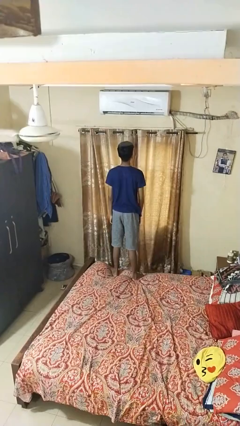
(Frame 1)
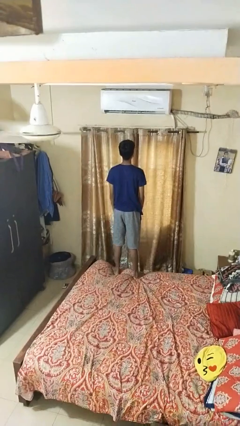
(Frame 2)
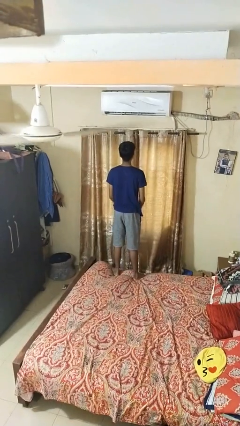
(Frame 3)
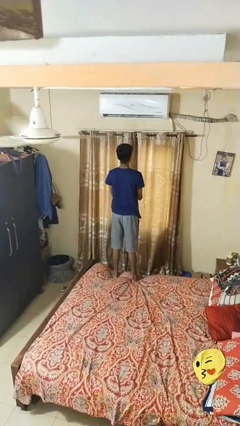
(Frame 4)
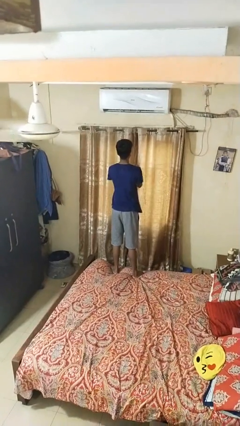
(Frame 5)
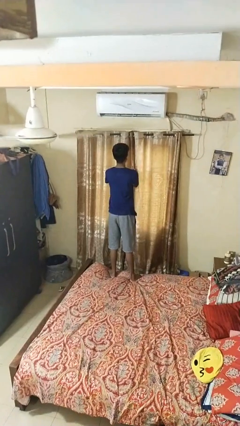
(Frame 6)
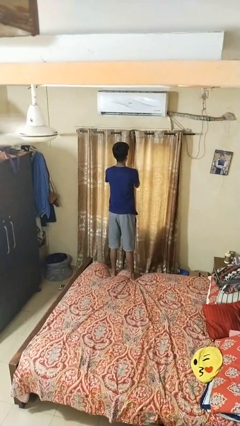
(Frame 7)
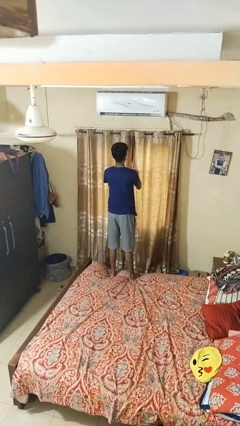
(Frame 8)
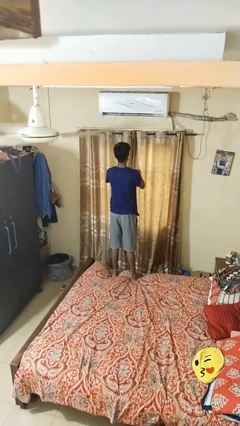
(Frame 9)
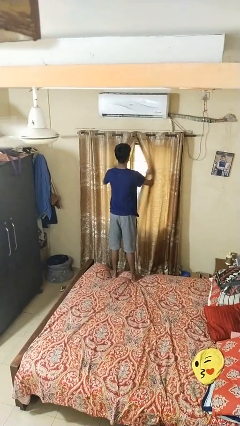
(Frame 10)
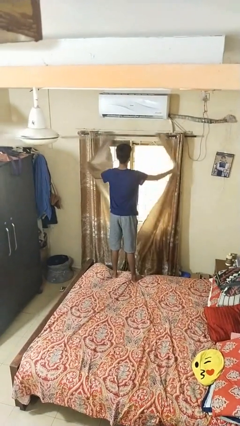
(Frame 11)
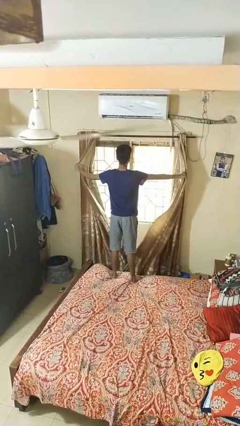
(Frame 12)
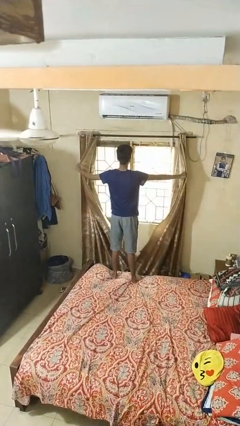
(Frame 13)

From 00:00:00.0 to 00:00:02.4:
person opens curtains

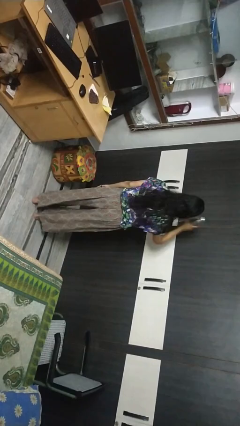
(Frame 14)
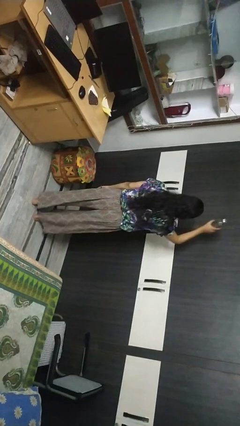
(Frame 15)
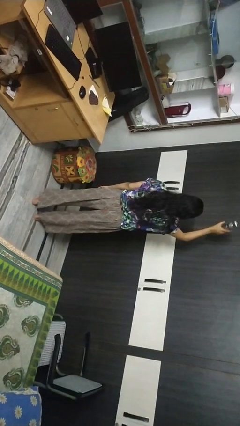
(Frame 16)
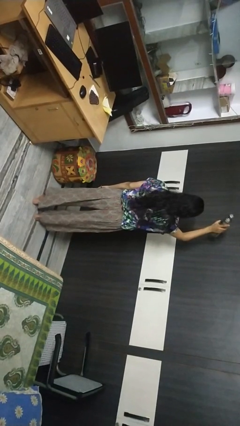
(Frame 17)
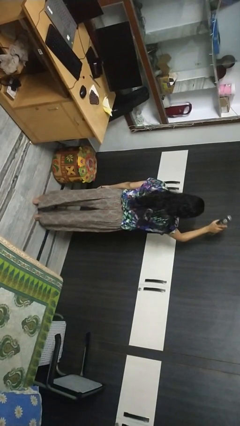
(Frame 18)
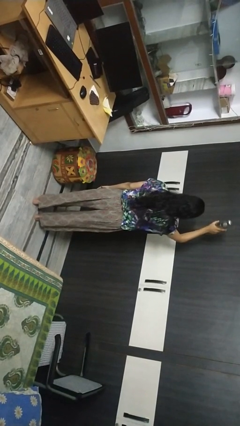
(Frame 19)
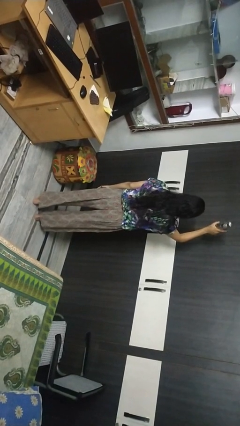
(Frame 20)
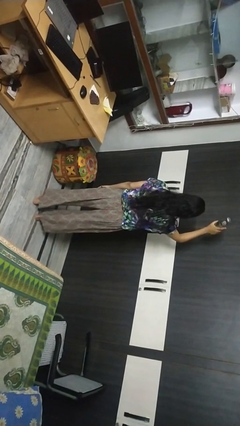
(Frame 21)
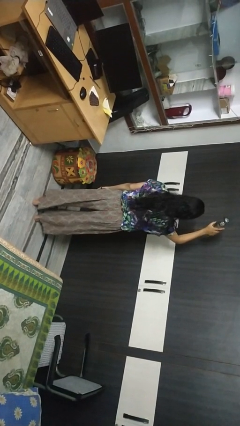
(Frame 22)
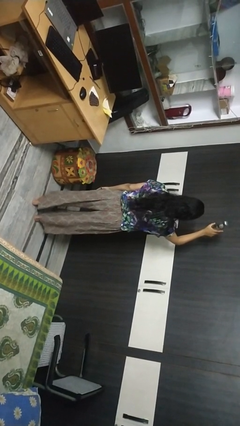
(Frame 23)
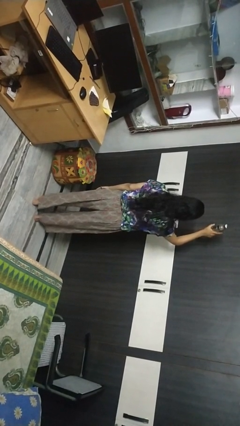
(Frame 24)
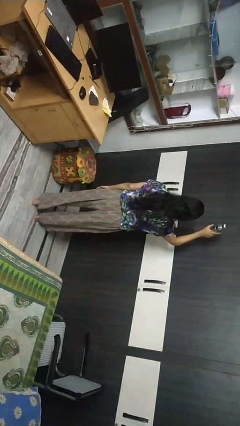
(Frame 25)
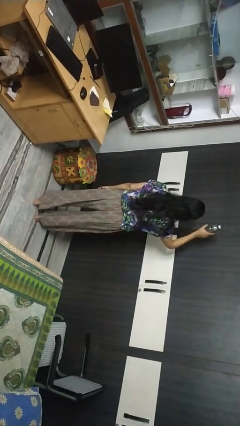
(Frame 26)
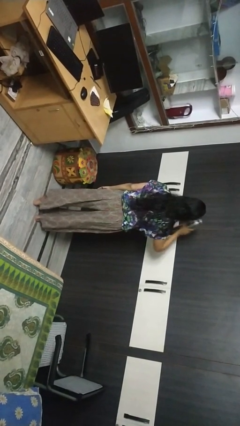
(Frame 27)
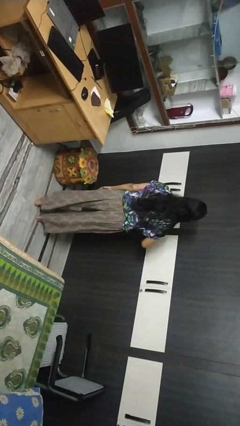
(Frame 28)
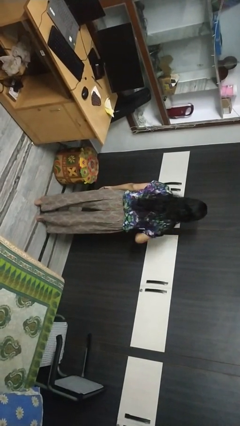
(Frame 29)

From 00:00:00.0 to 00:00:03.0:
person holds object above head

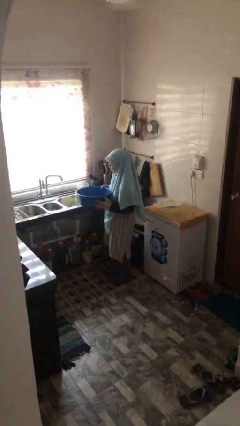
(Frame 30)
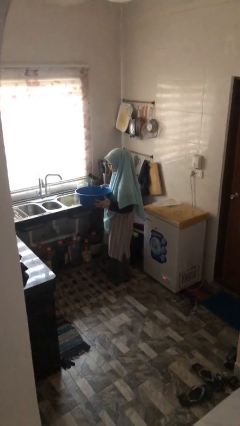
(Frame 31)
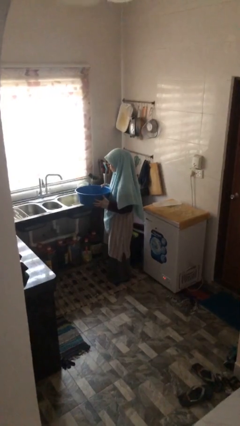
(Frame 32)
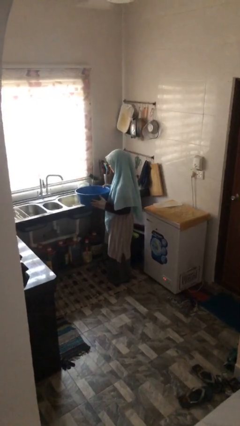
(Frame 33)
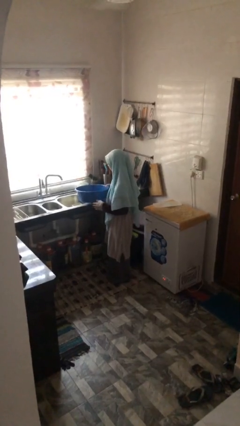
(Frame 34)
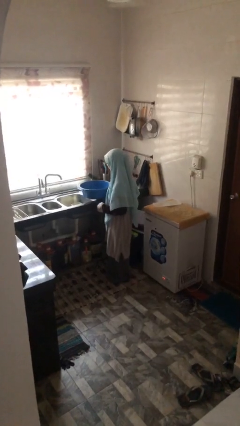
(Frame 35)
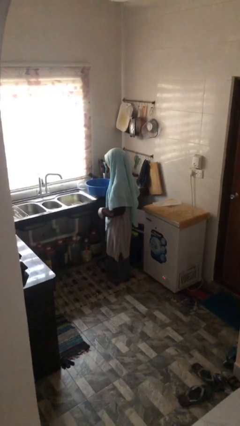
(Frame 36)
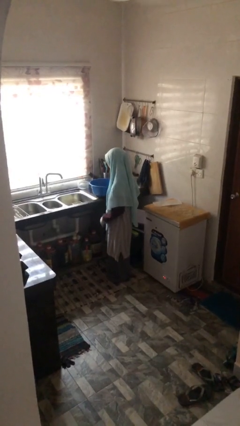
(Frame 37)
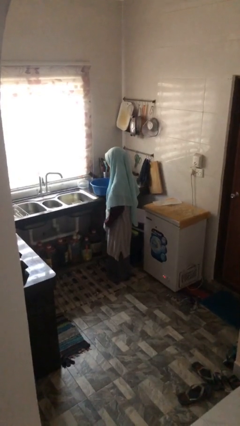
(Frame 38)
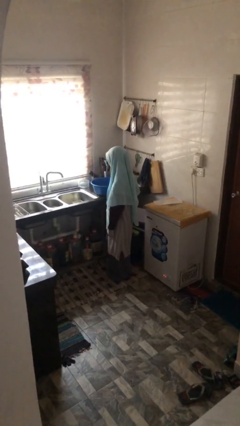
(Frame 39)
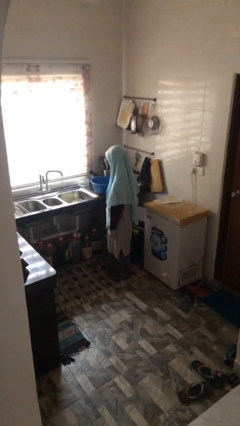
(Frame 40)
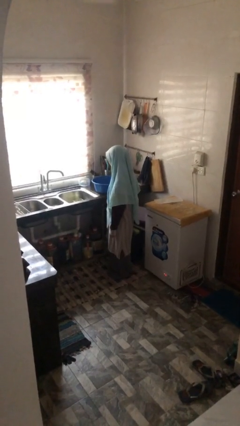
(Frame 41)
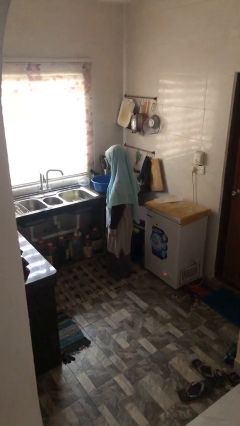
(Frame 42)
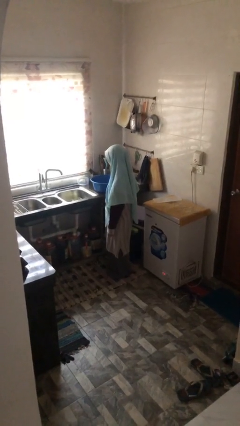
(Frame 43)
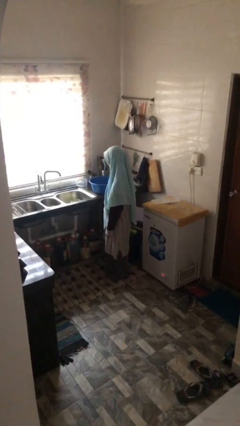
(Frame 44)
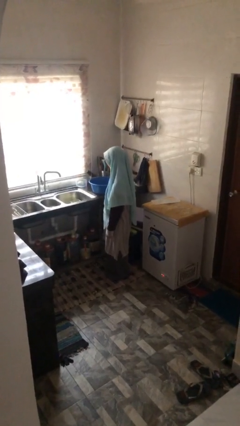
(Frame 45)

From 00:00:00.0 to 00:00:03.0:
person puts down object on countertop

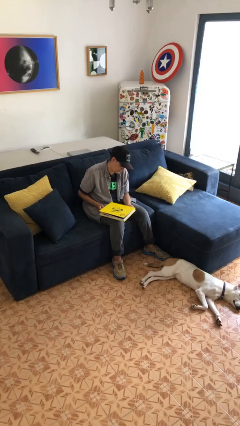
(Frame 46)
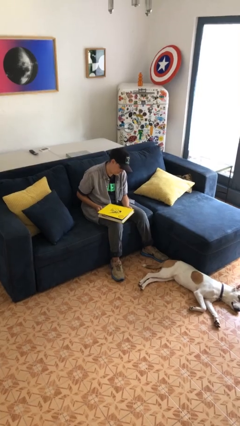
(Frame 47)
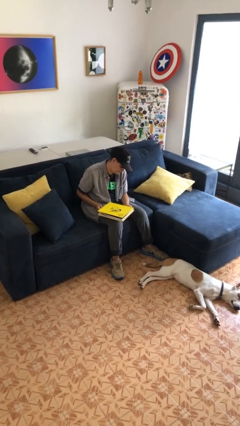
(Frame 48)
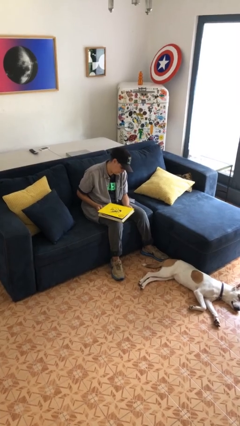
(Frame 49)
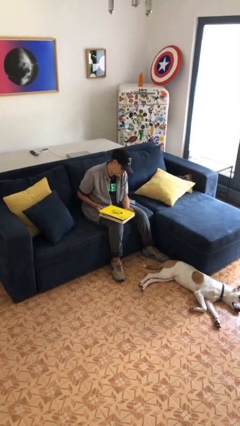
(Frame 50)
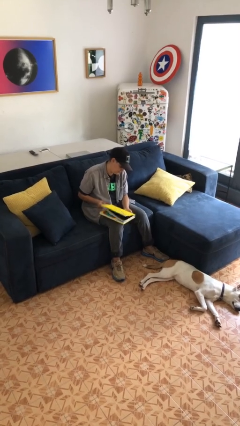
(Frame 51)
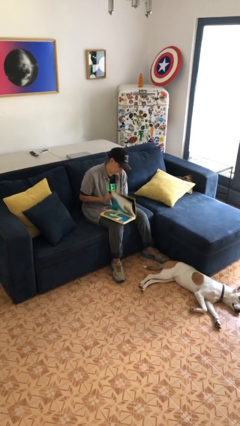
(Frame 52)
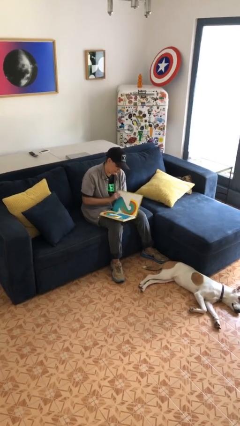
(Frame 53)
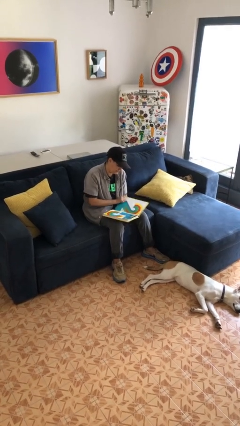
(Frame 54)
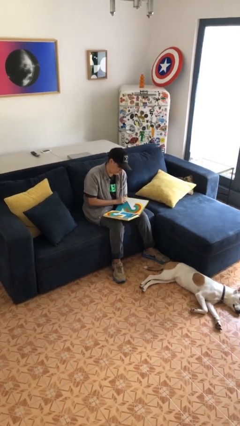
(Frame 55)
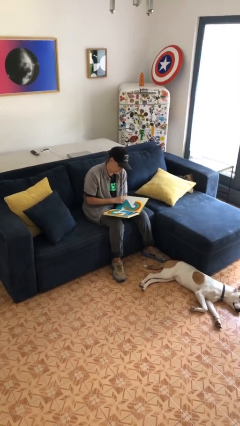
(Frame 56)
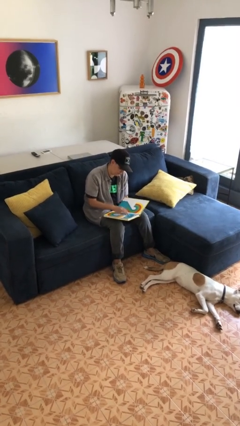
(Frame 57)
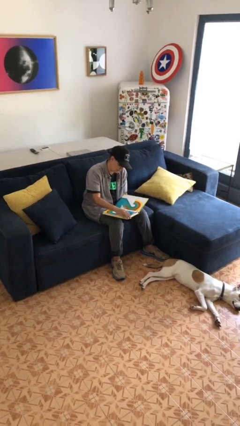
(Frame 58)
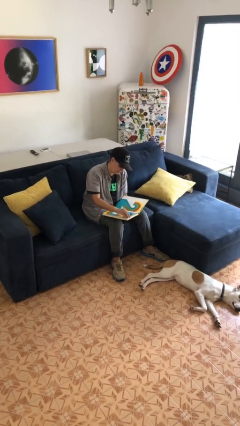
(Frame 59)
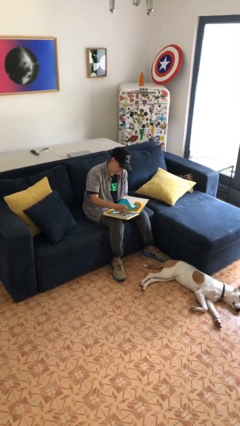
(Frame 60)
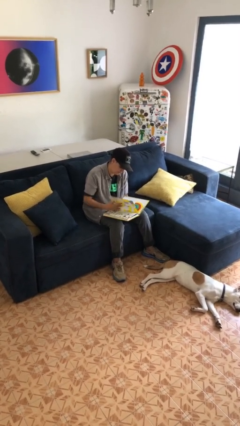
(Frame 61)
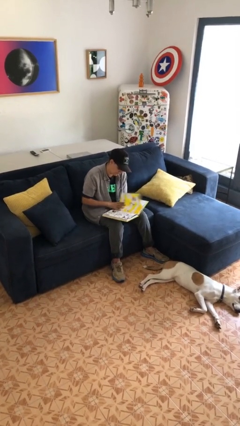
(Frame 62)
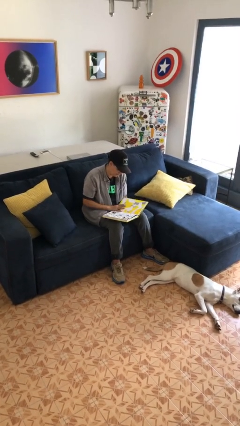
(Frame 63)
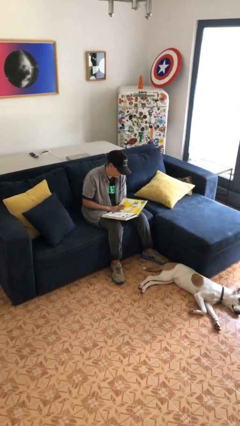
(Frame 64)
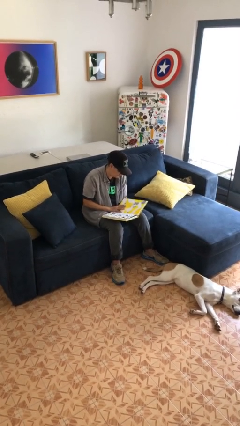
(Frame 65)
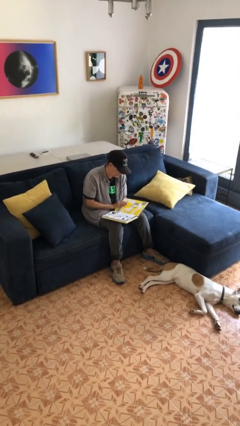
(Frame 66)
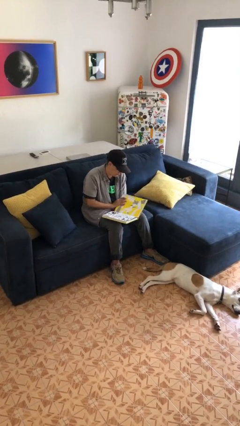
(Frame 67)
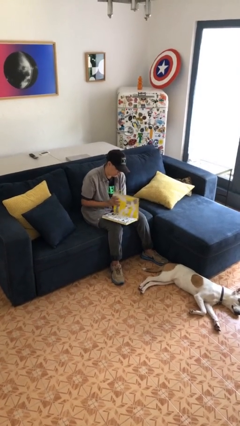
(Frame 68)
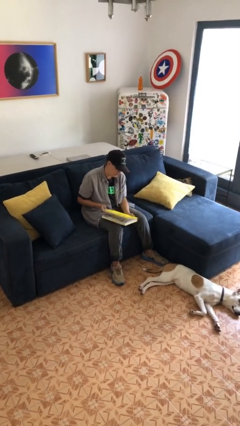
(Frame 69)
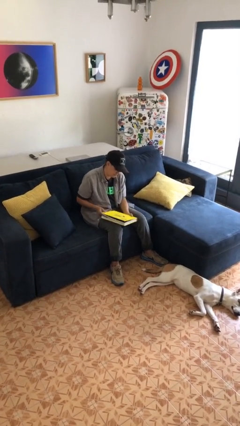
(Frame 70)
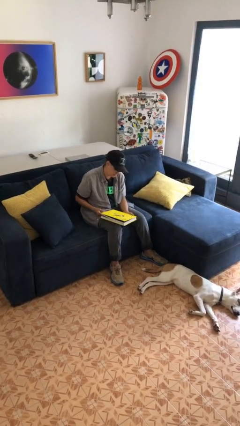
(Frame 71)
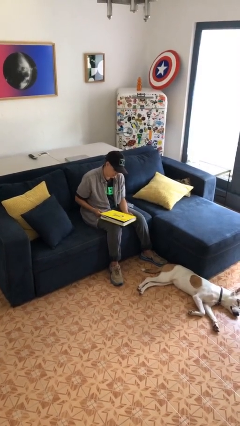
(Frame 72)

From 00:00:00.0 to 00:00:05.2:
person reads book

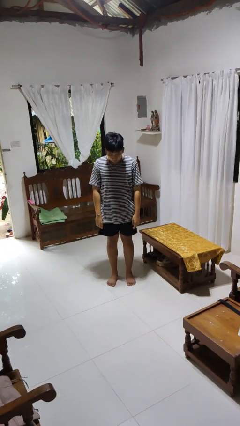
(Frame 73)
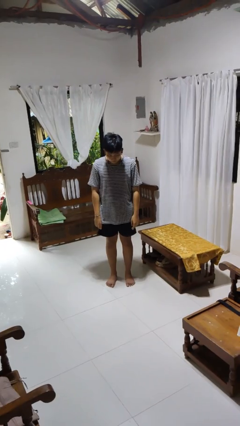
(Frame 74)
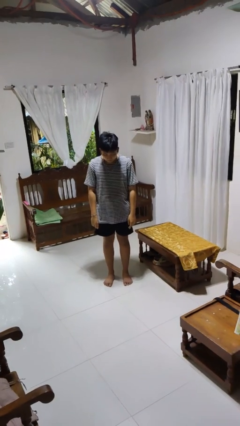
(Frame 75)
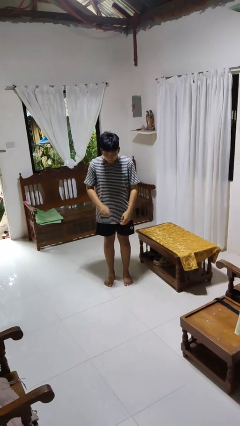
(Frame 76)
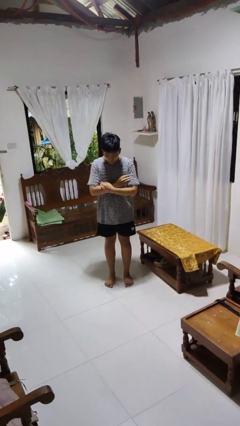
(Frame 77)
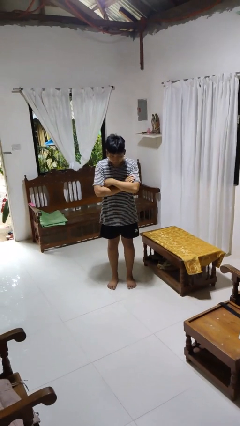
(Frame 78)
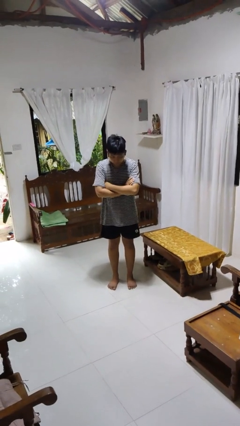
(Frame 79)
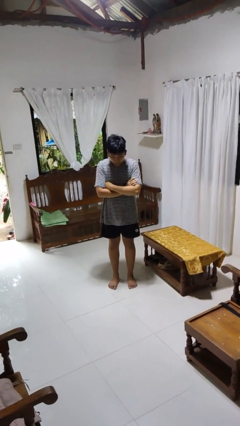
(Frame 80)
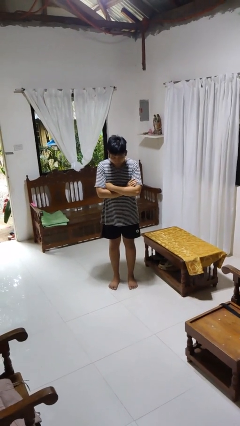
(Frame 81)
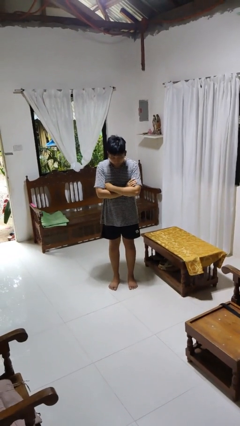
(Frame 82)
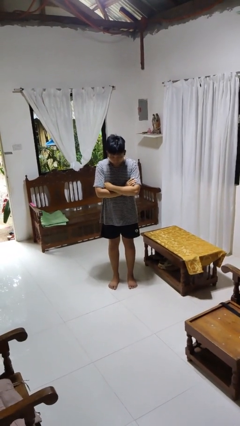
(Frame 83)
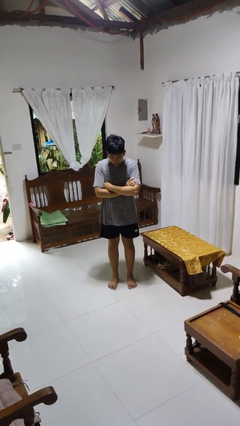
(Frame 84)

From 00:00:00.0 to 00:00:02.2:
person gestures arms x

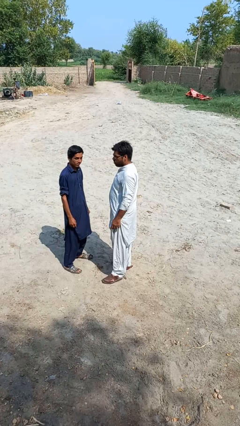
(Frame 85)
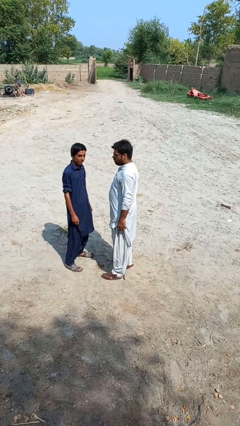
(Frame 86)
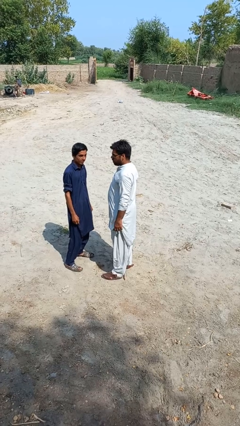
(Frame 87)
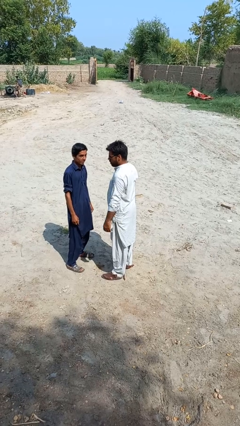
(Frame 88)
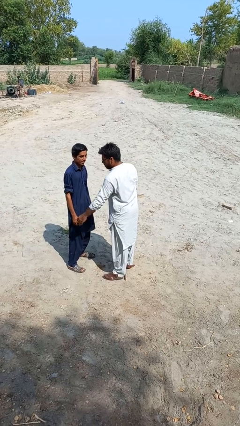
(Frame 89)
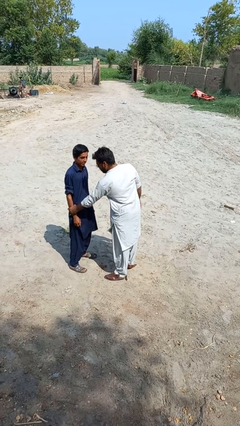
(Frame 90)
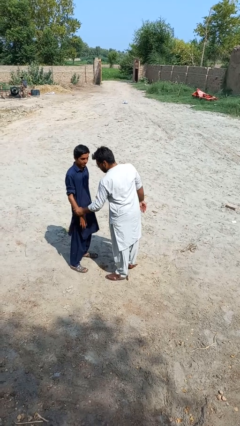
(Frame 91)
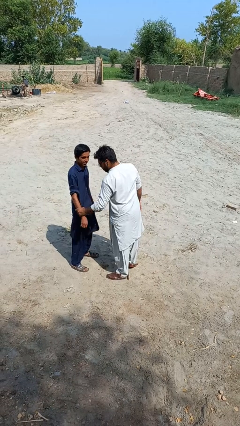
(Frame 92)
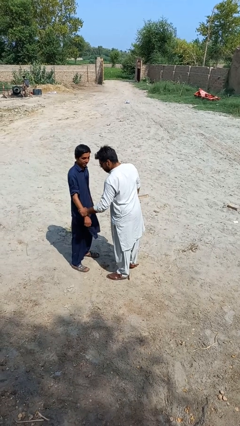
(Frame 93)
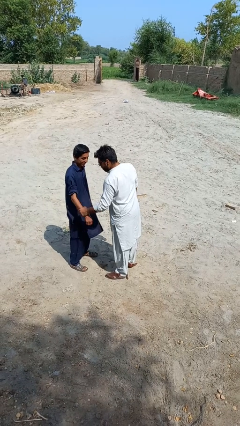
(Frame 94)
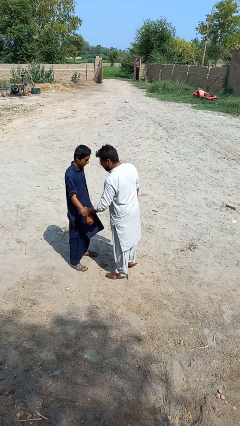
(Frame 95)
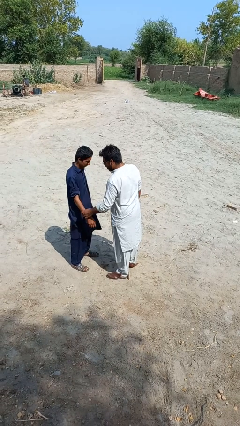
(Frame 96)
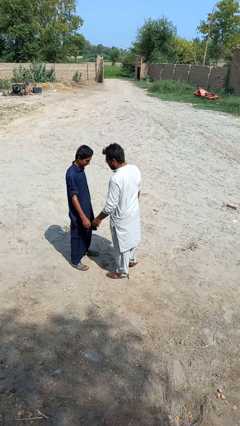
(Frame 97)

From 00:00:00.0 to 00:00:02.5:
person grabs person by forearm
